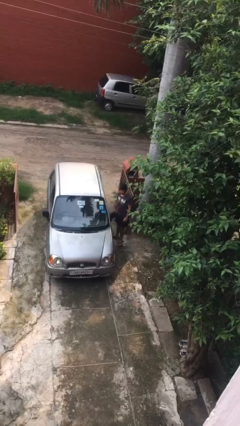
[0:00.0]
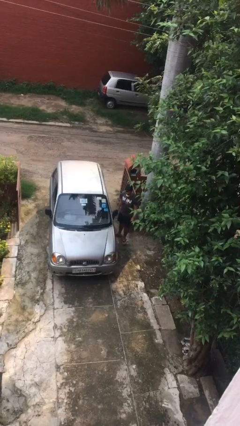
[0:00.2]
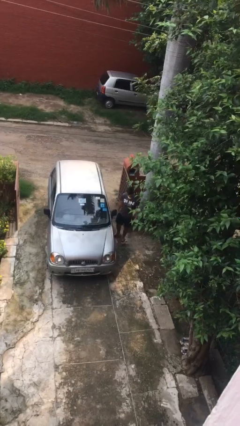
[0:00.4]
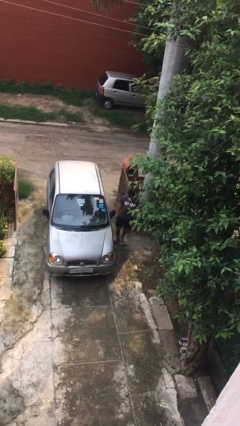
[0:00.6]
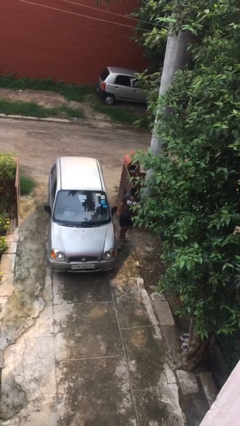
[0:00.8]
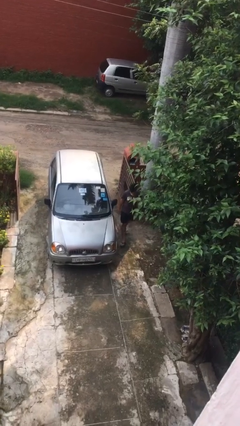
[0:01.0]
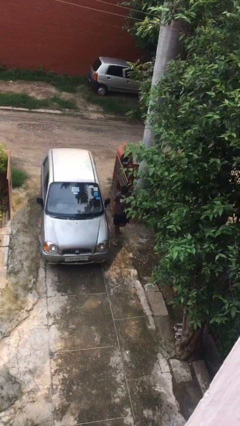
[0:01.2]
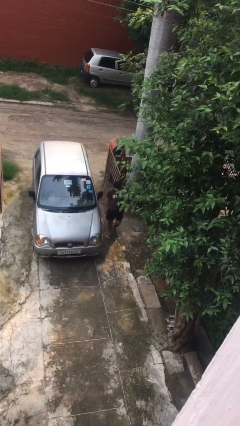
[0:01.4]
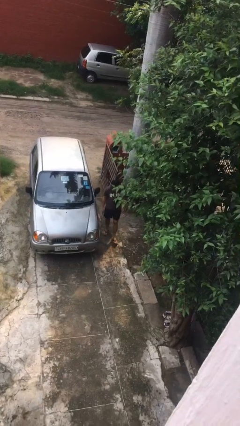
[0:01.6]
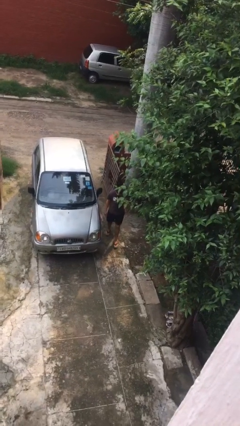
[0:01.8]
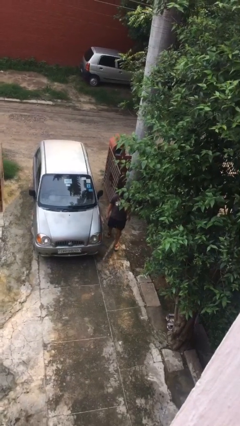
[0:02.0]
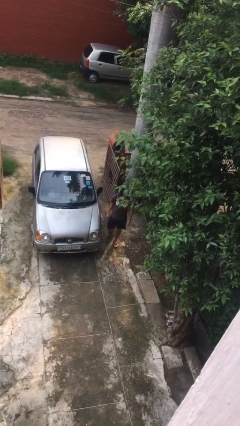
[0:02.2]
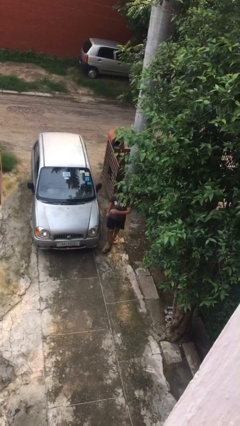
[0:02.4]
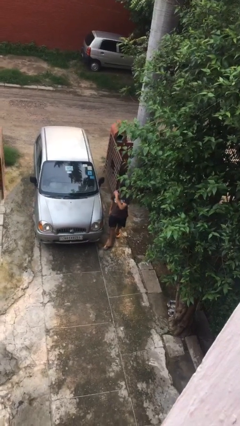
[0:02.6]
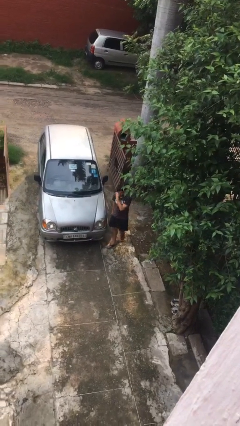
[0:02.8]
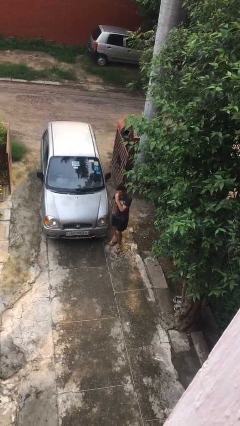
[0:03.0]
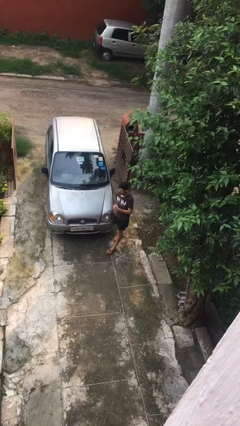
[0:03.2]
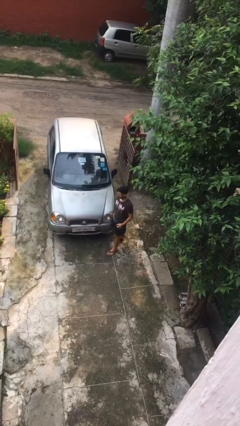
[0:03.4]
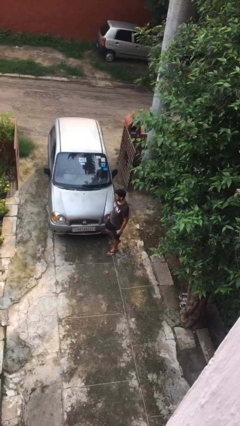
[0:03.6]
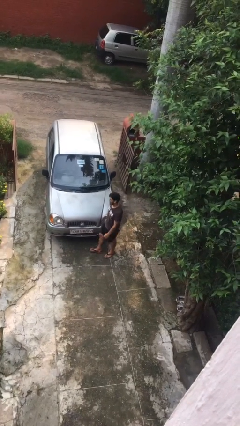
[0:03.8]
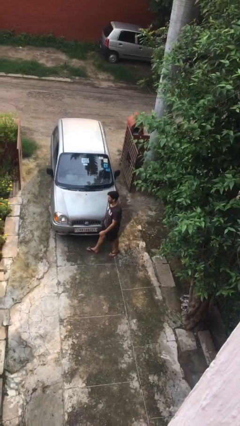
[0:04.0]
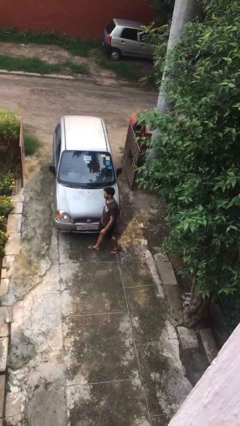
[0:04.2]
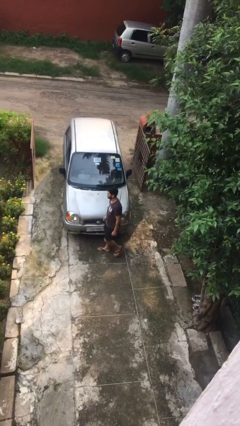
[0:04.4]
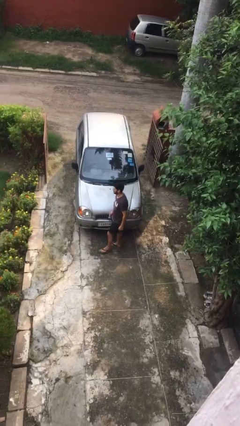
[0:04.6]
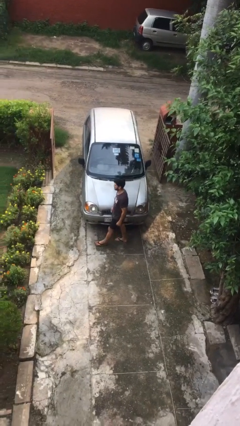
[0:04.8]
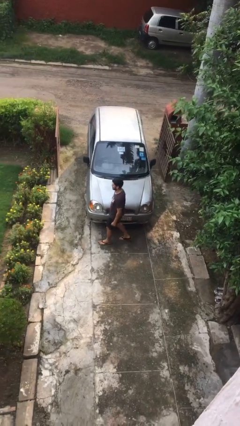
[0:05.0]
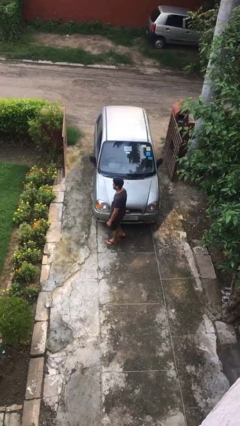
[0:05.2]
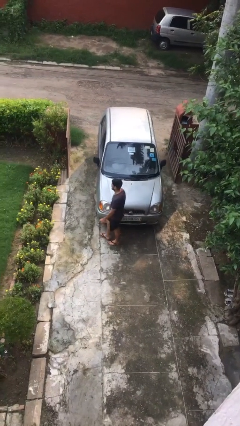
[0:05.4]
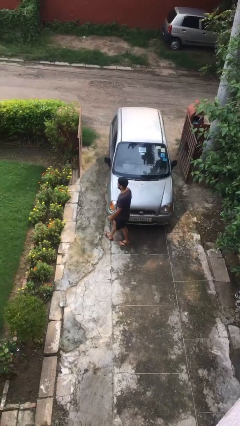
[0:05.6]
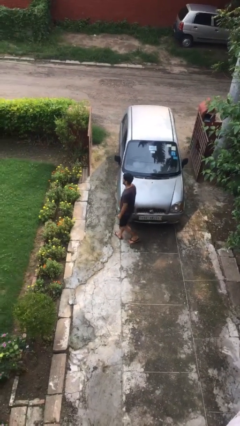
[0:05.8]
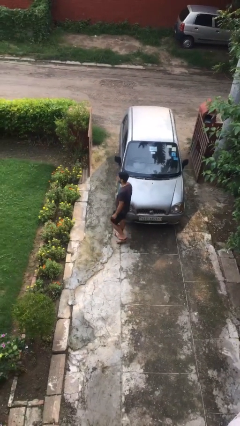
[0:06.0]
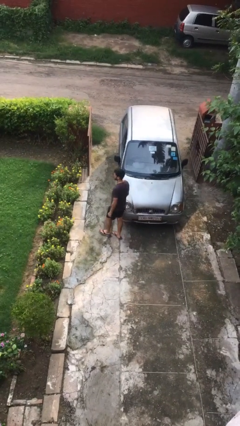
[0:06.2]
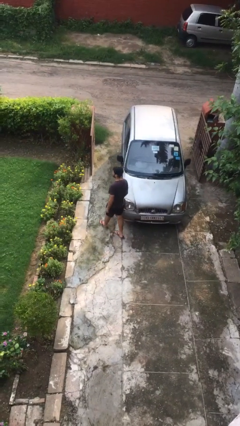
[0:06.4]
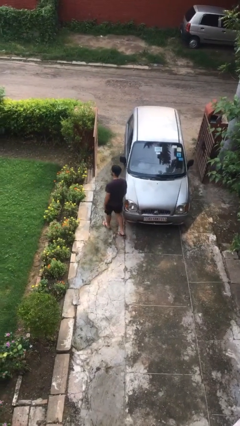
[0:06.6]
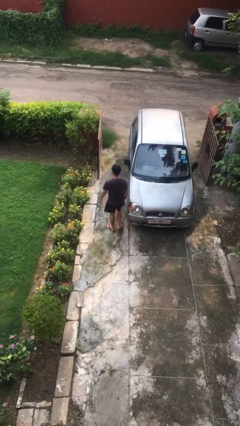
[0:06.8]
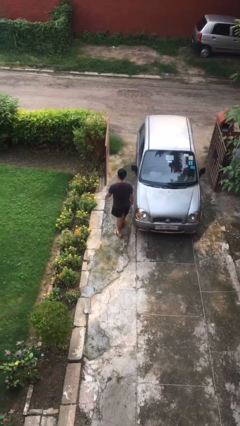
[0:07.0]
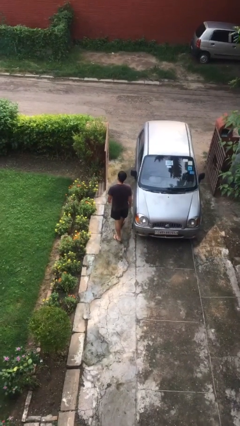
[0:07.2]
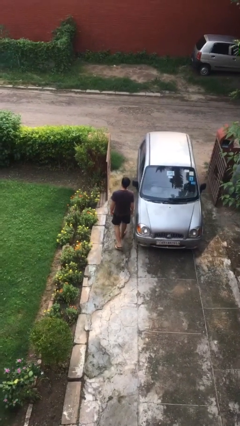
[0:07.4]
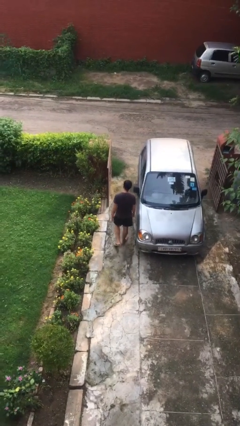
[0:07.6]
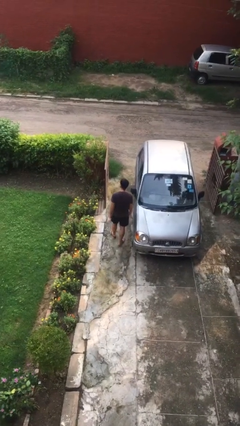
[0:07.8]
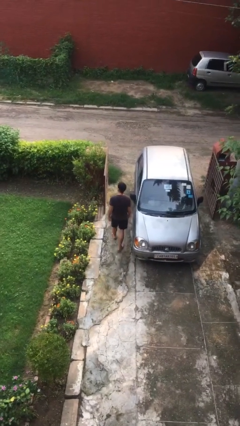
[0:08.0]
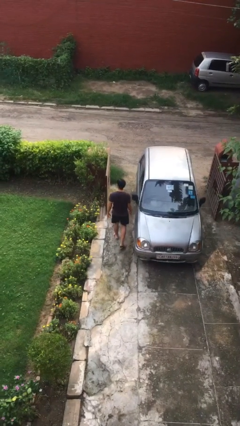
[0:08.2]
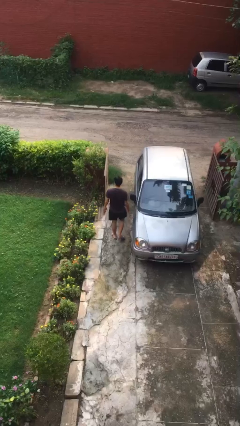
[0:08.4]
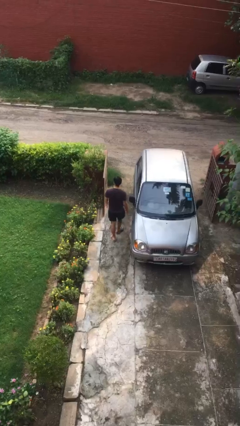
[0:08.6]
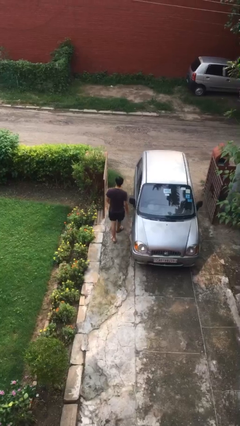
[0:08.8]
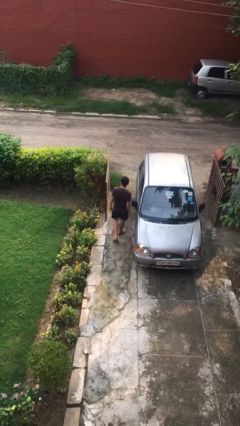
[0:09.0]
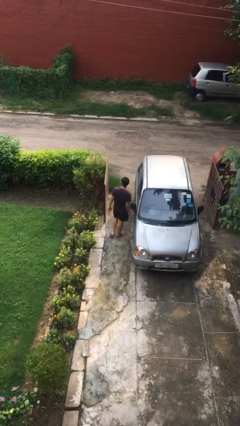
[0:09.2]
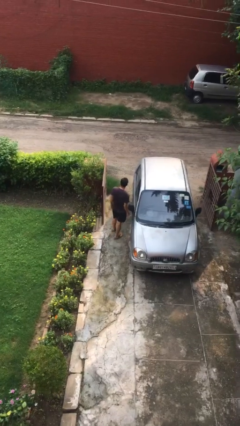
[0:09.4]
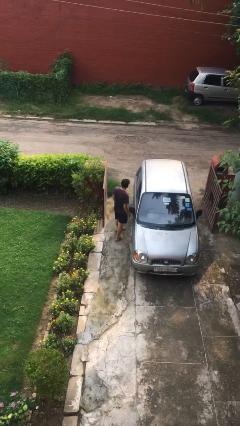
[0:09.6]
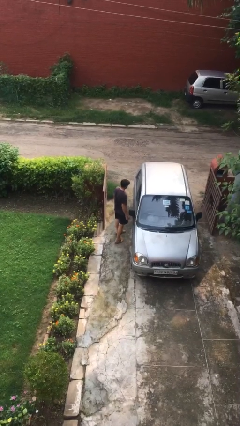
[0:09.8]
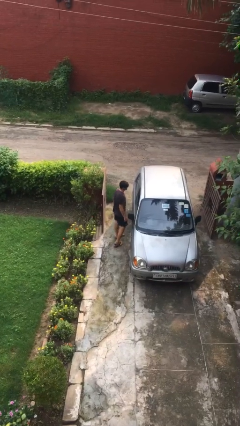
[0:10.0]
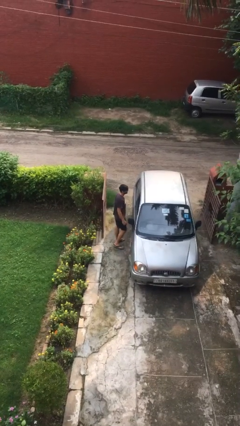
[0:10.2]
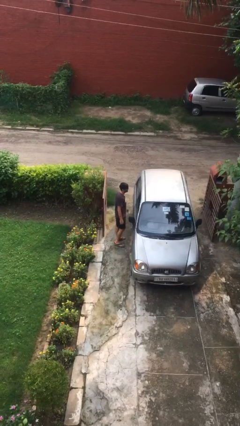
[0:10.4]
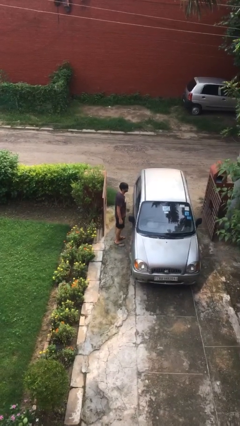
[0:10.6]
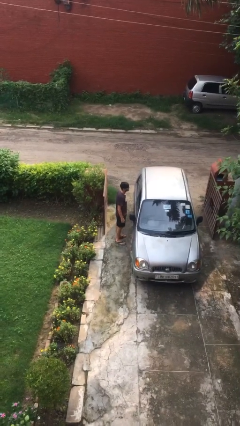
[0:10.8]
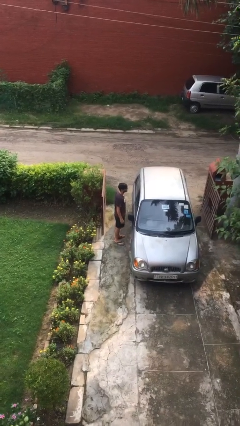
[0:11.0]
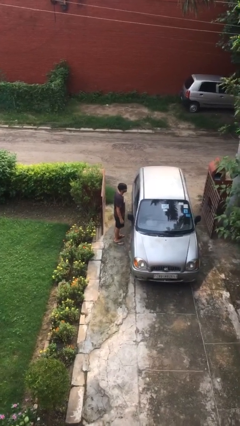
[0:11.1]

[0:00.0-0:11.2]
person walks around car

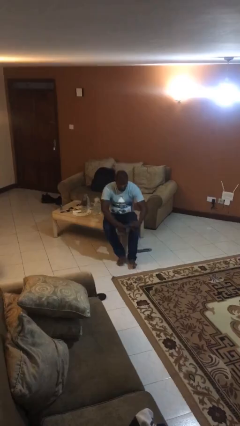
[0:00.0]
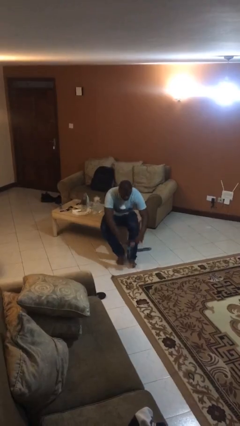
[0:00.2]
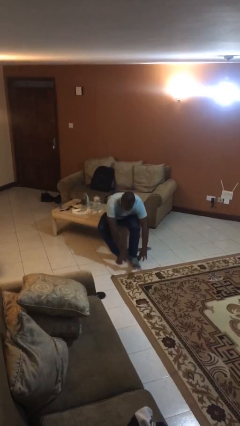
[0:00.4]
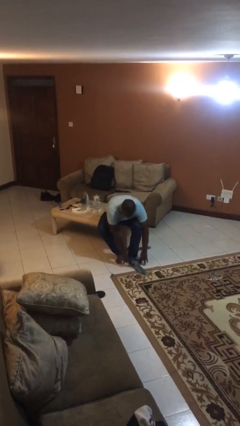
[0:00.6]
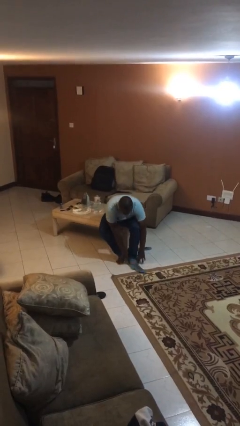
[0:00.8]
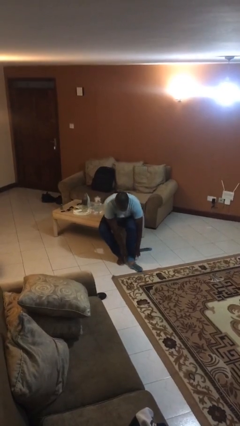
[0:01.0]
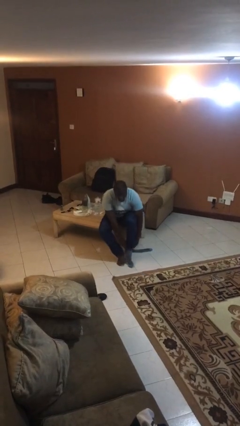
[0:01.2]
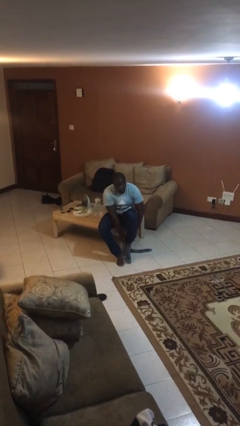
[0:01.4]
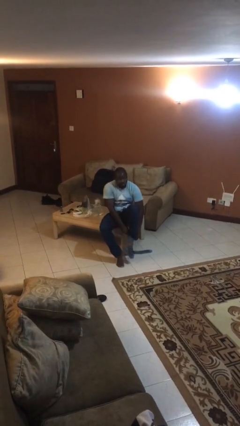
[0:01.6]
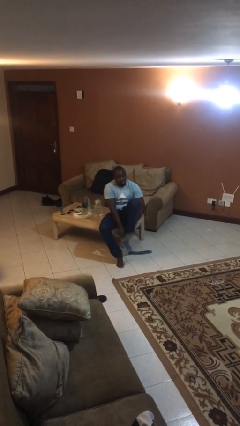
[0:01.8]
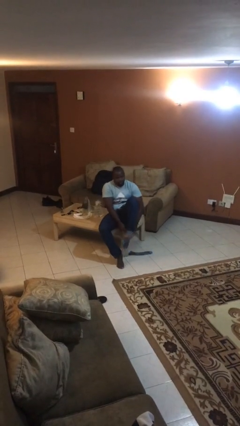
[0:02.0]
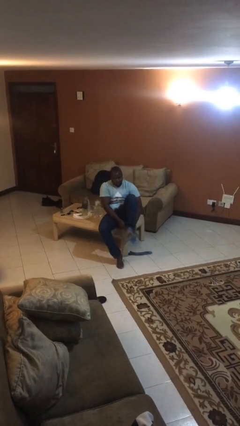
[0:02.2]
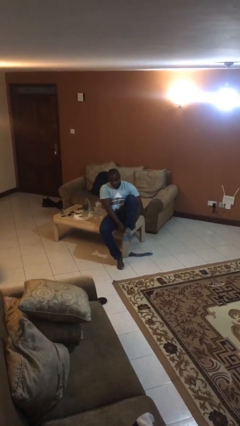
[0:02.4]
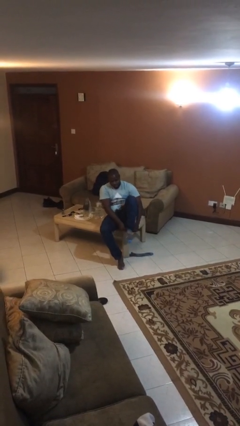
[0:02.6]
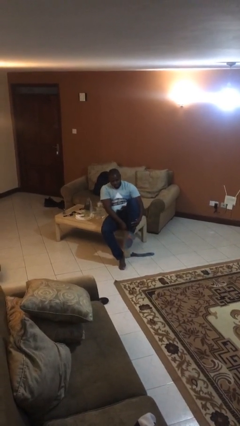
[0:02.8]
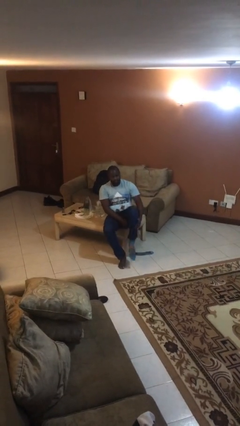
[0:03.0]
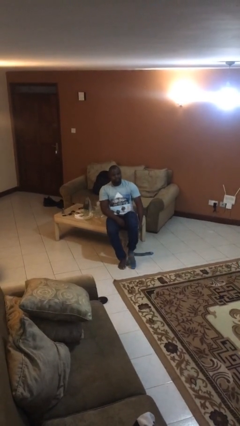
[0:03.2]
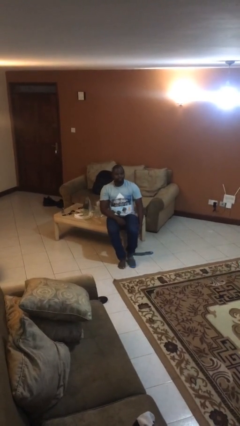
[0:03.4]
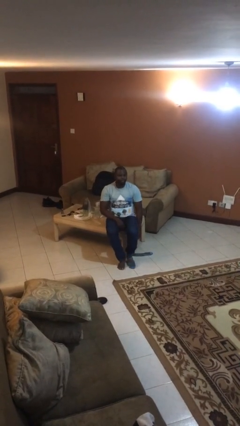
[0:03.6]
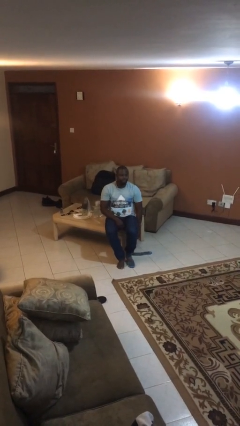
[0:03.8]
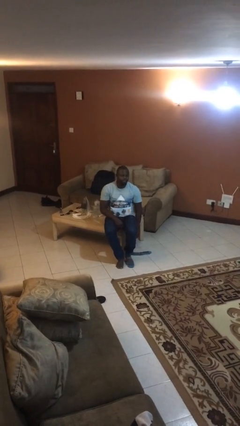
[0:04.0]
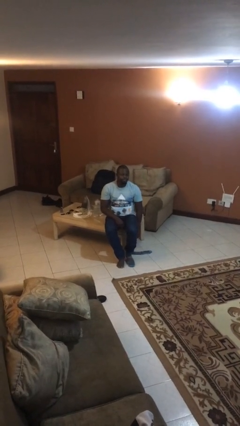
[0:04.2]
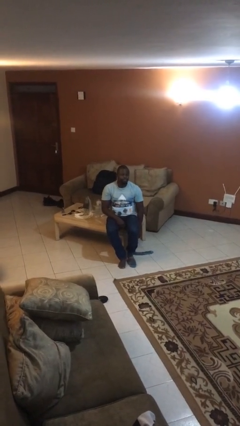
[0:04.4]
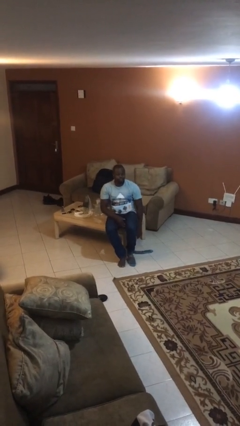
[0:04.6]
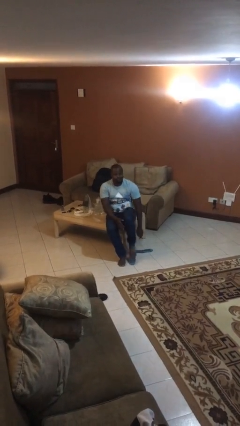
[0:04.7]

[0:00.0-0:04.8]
person puts on socks

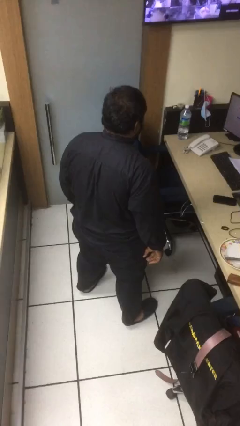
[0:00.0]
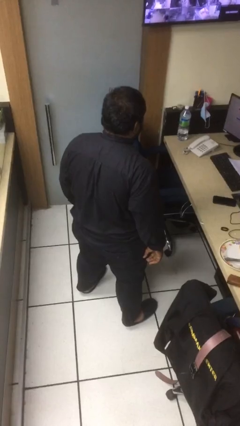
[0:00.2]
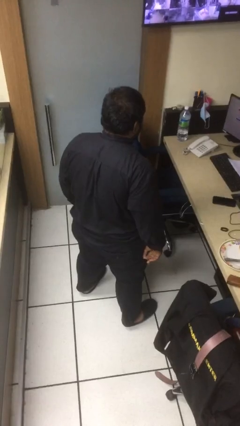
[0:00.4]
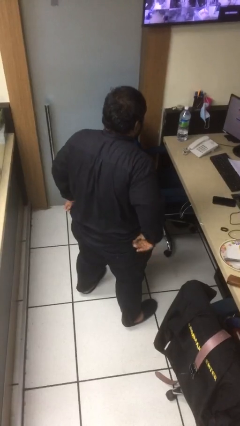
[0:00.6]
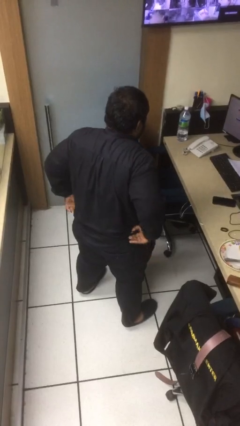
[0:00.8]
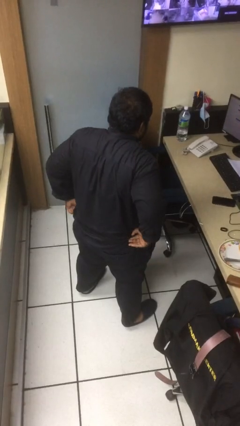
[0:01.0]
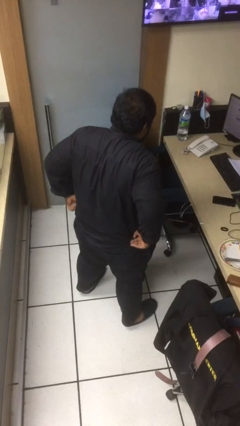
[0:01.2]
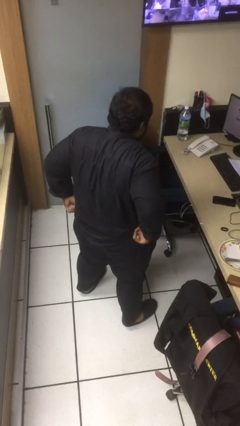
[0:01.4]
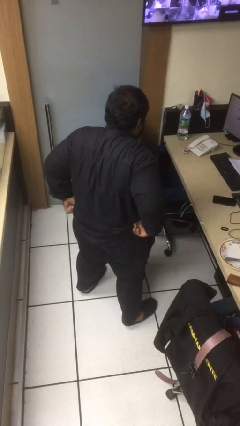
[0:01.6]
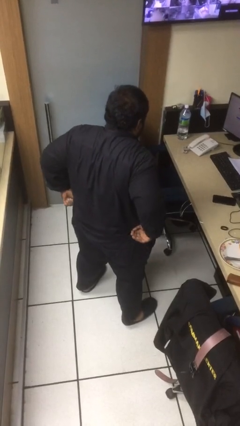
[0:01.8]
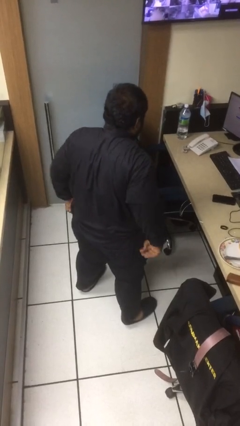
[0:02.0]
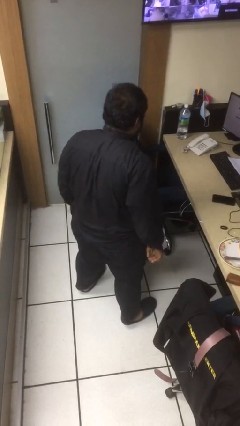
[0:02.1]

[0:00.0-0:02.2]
person hikes up pants
